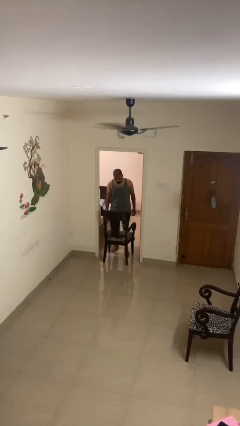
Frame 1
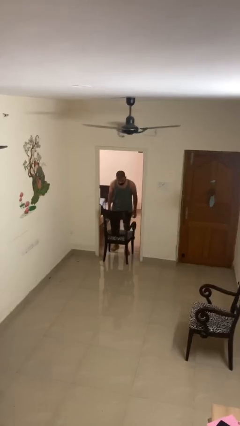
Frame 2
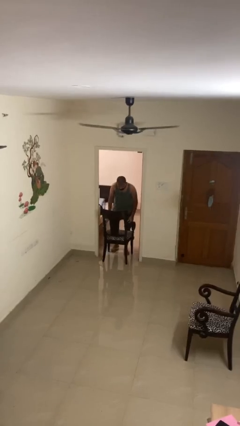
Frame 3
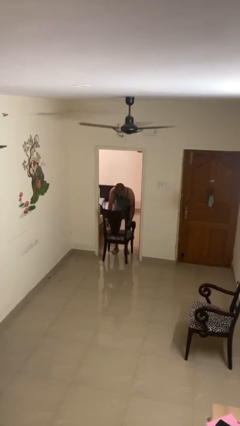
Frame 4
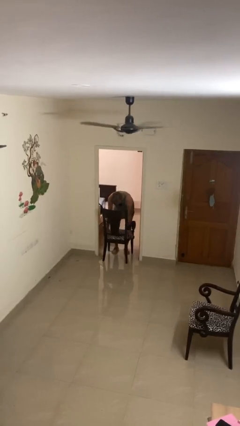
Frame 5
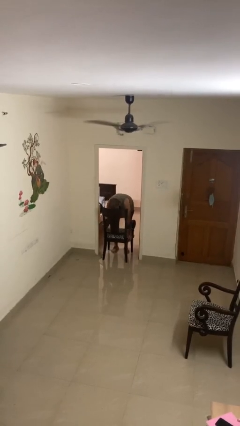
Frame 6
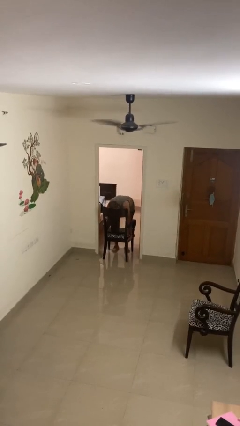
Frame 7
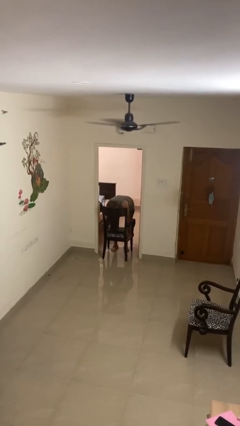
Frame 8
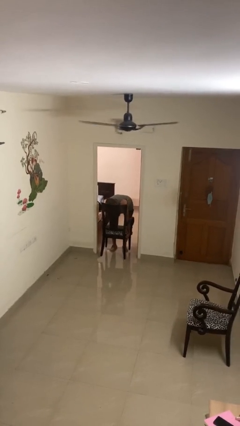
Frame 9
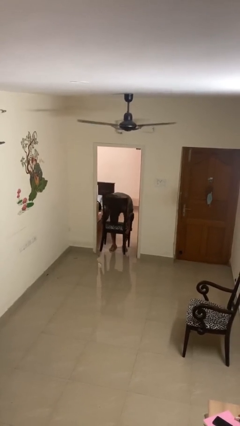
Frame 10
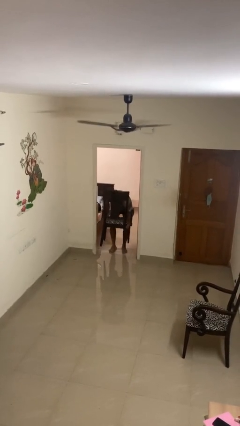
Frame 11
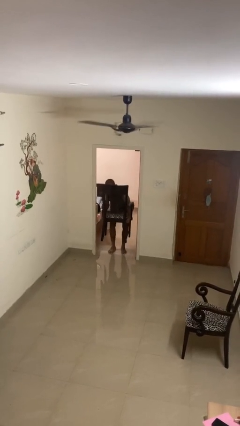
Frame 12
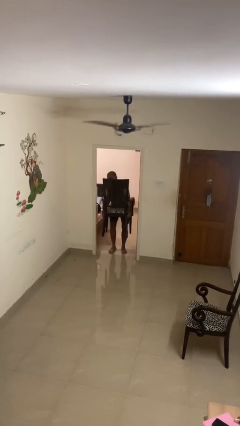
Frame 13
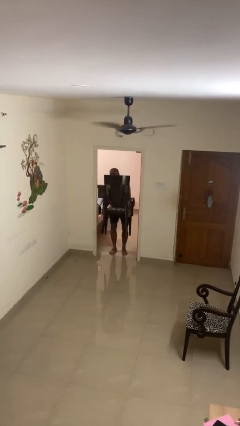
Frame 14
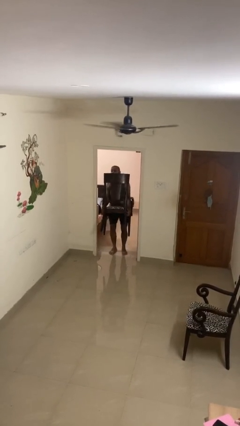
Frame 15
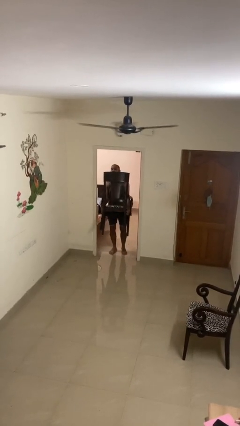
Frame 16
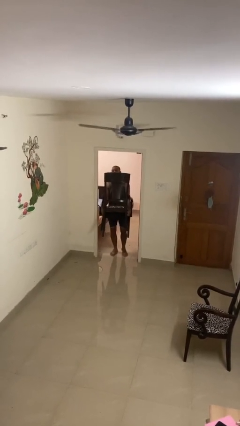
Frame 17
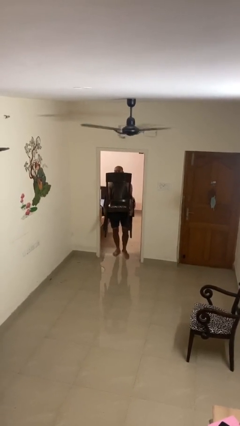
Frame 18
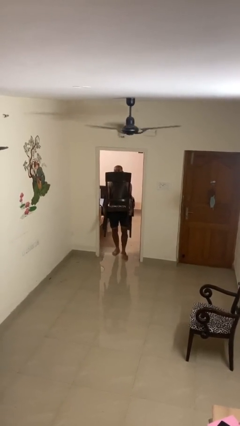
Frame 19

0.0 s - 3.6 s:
person picks up object from floor

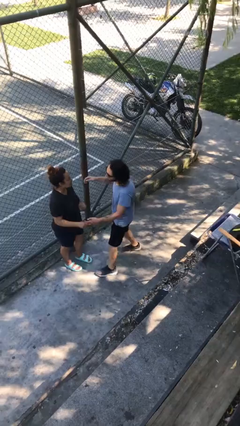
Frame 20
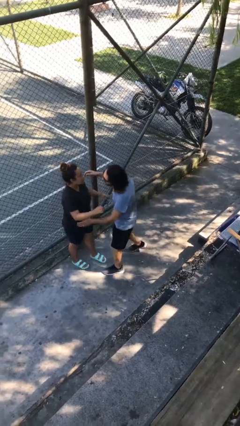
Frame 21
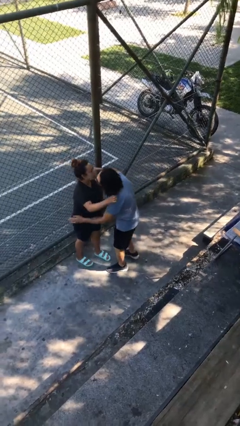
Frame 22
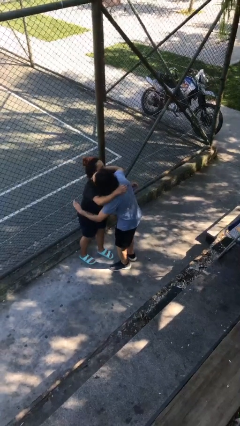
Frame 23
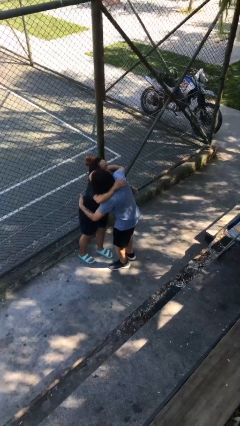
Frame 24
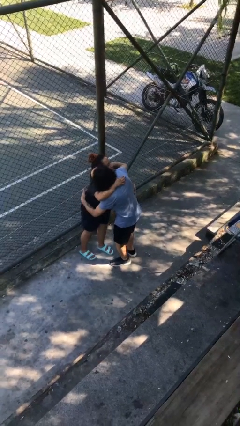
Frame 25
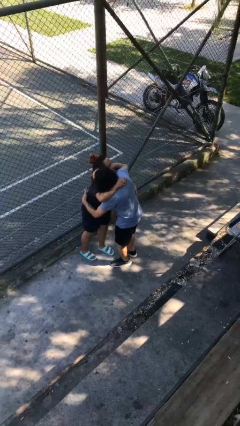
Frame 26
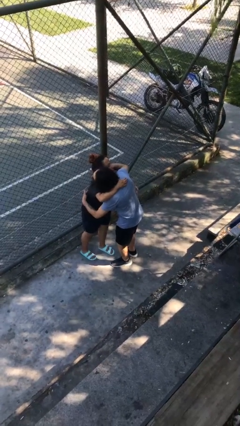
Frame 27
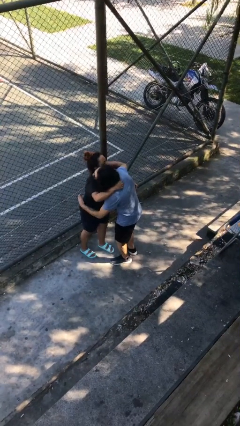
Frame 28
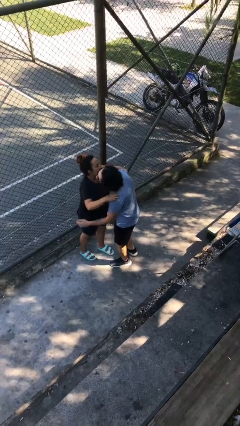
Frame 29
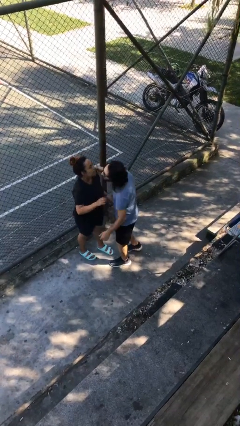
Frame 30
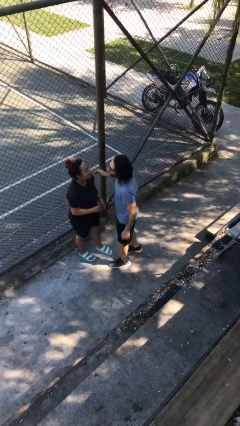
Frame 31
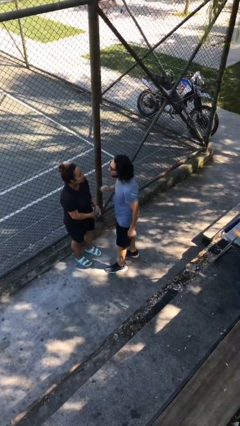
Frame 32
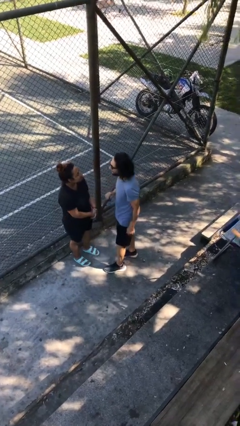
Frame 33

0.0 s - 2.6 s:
person embraces person

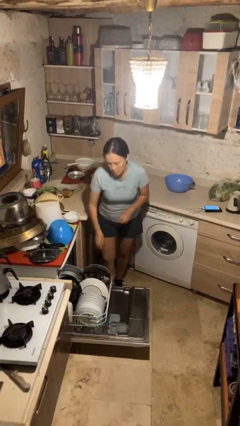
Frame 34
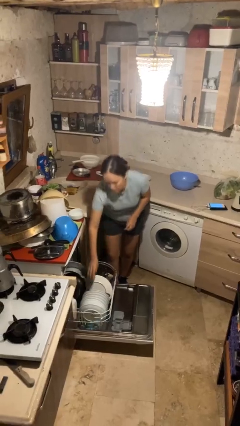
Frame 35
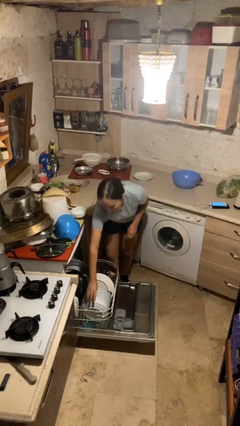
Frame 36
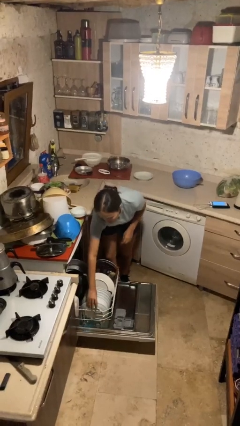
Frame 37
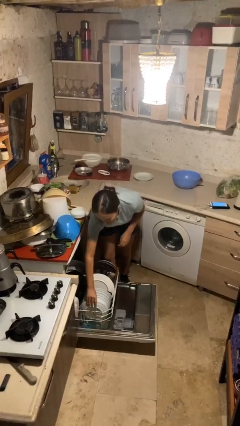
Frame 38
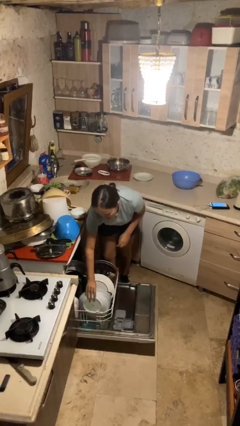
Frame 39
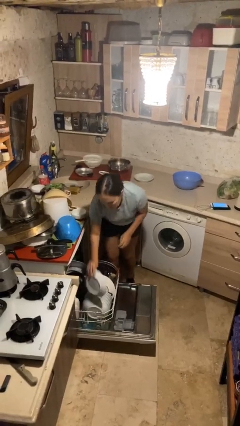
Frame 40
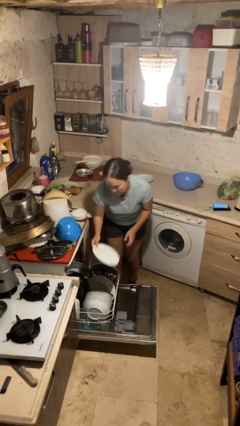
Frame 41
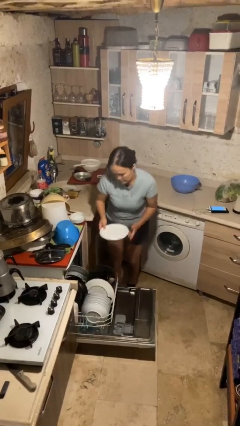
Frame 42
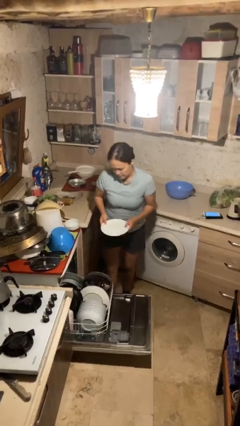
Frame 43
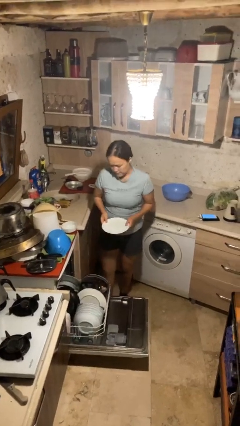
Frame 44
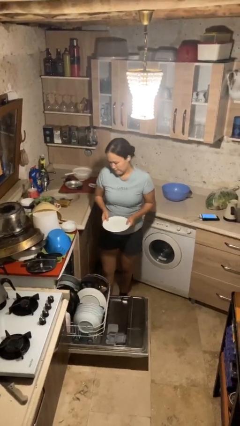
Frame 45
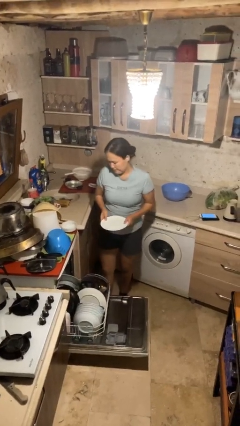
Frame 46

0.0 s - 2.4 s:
person unloads dishwasher

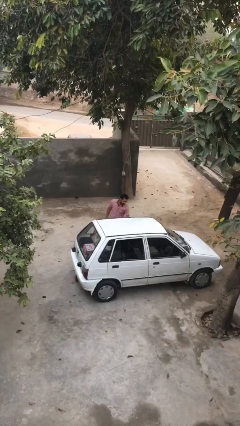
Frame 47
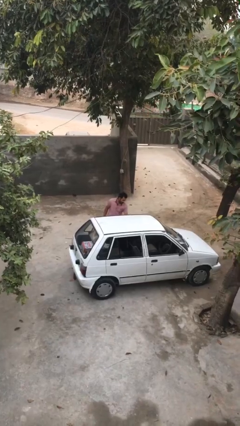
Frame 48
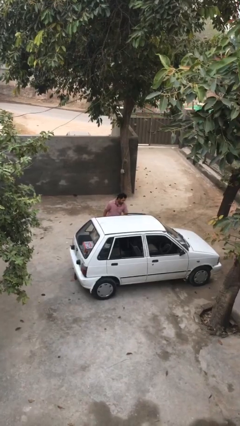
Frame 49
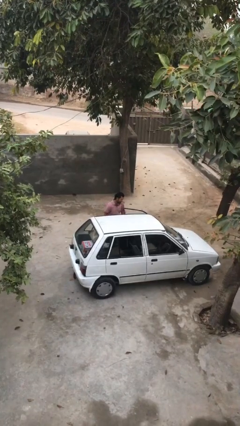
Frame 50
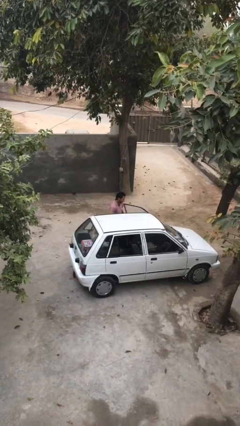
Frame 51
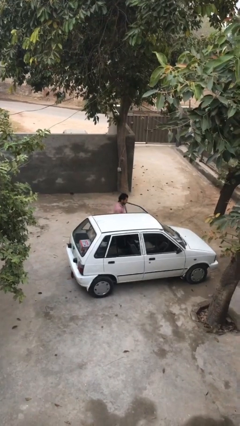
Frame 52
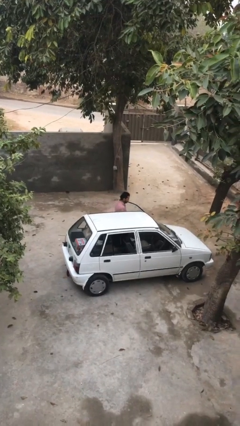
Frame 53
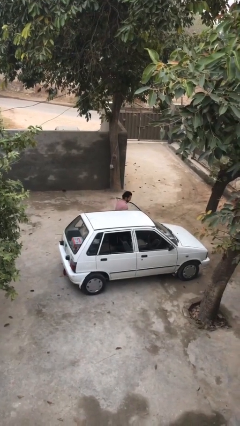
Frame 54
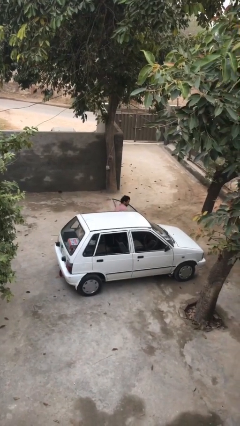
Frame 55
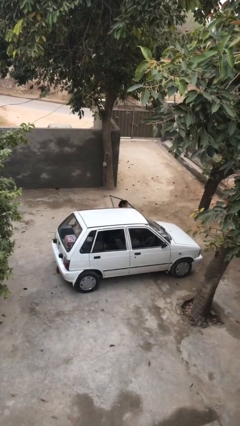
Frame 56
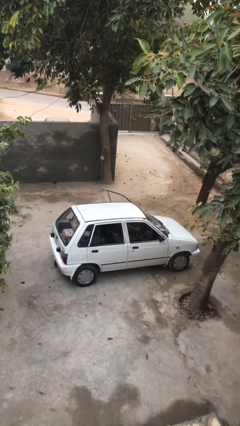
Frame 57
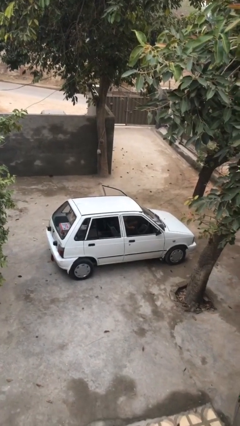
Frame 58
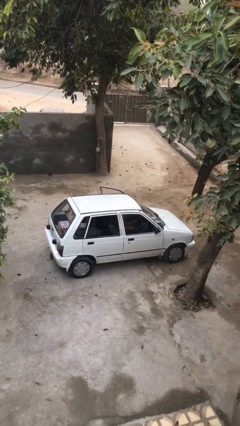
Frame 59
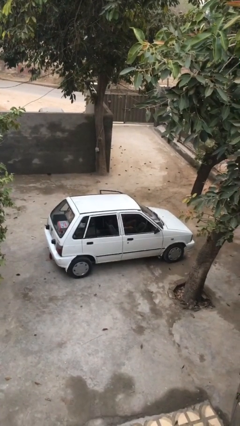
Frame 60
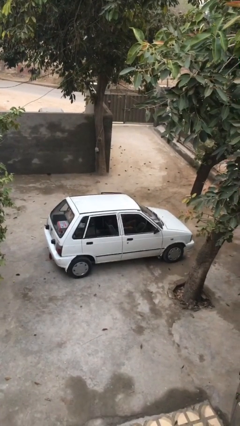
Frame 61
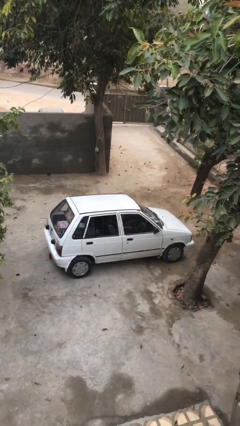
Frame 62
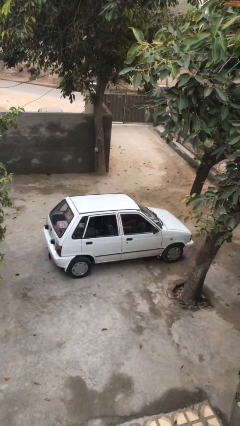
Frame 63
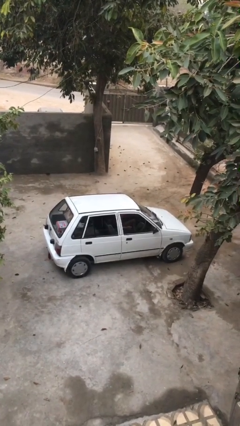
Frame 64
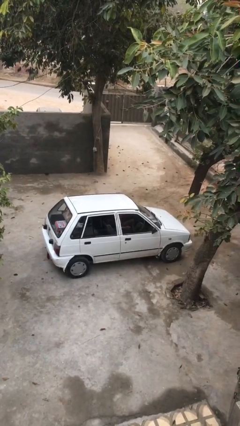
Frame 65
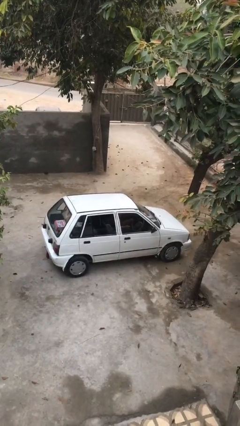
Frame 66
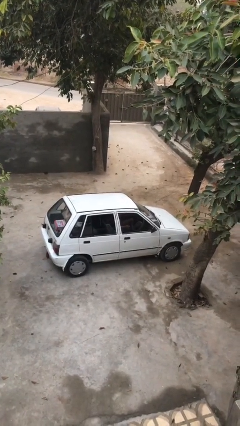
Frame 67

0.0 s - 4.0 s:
person enters car

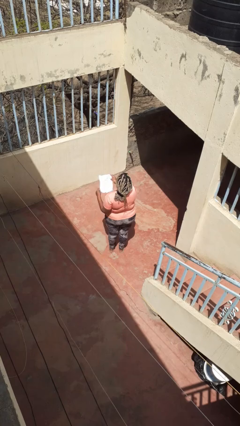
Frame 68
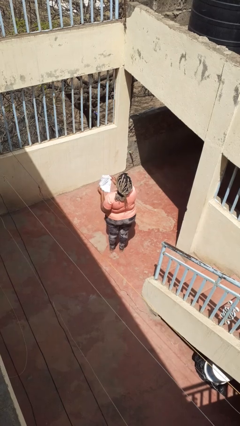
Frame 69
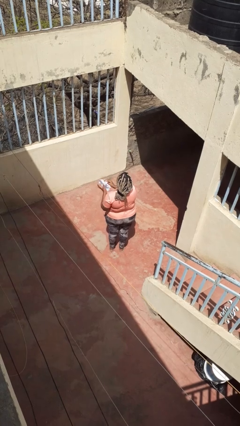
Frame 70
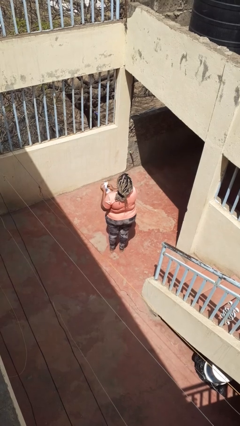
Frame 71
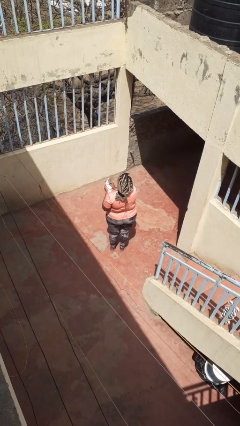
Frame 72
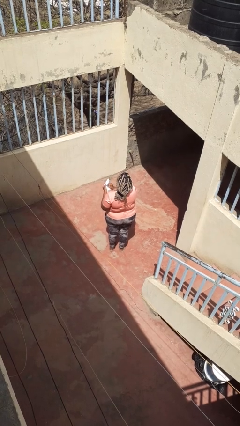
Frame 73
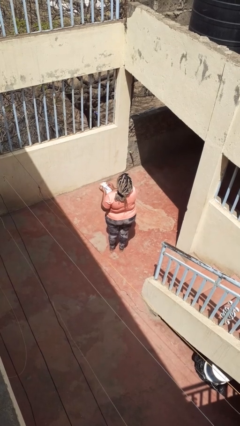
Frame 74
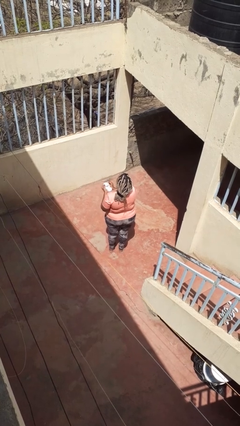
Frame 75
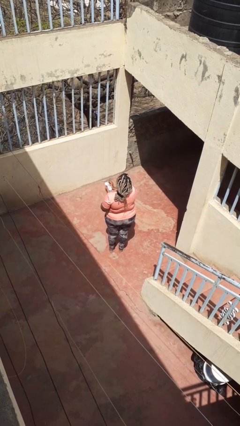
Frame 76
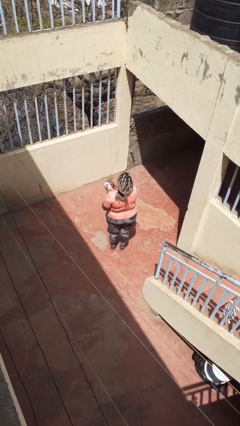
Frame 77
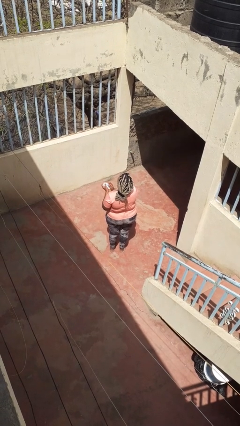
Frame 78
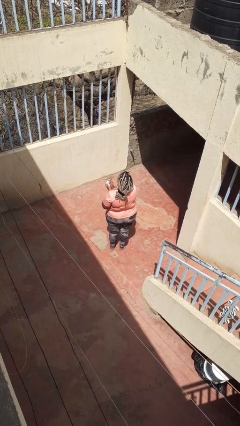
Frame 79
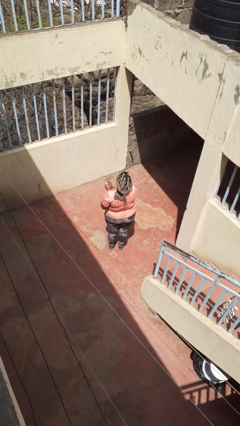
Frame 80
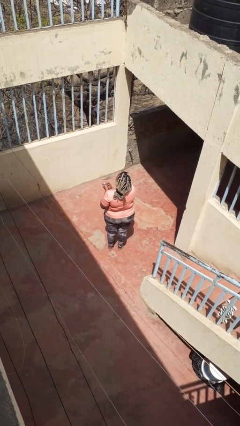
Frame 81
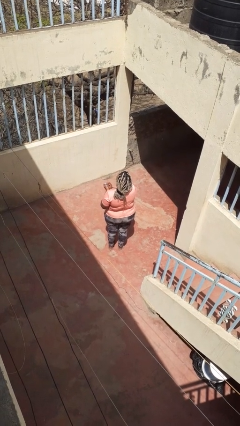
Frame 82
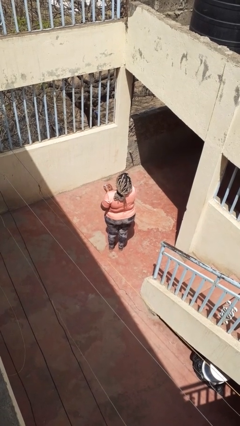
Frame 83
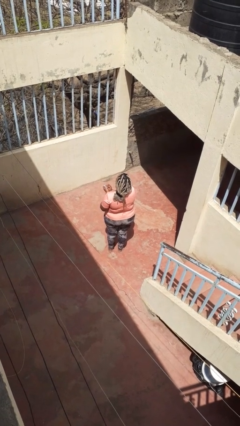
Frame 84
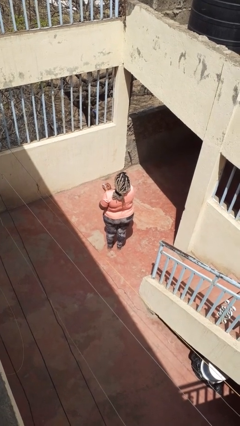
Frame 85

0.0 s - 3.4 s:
person crumples paper

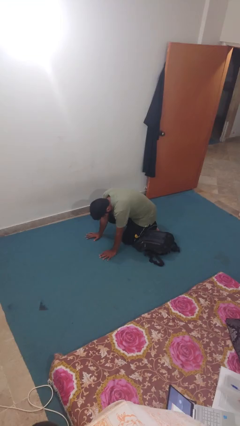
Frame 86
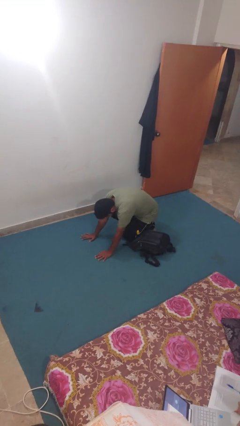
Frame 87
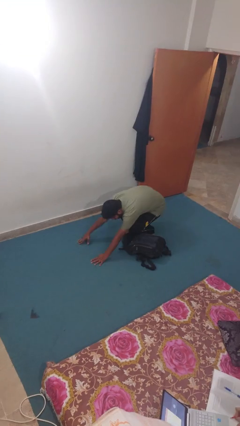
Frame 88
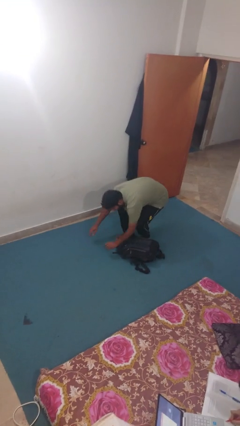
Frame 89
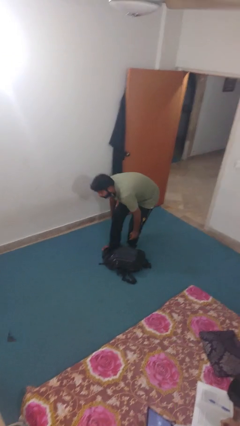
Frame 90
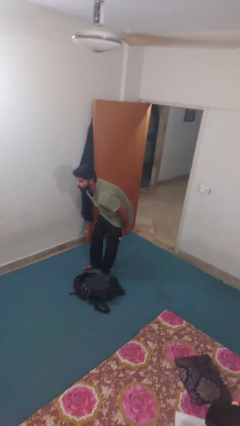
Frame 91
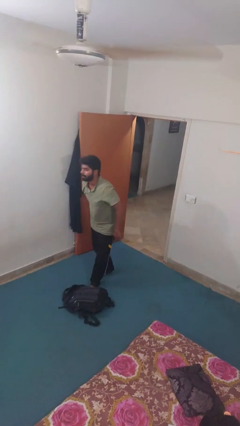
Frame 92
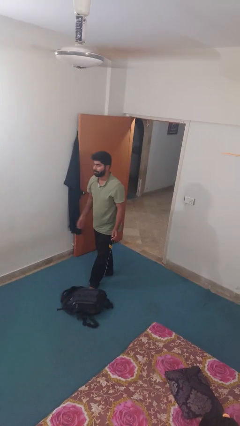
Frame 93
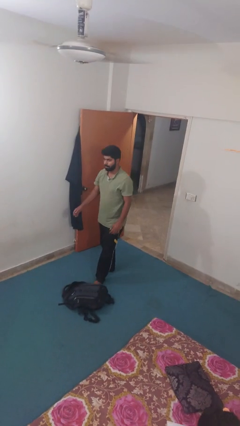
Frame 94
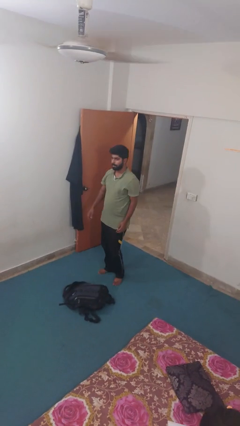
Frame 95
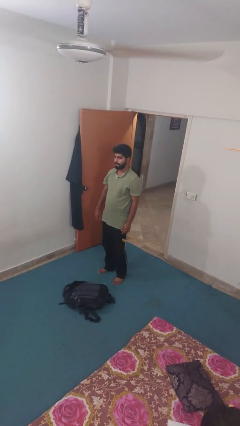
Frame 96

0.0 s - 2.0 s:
person stands up from floor
